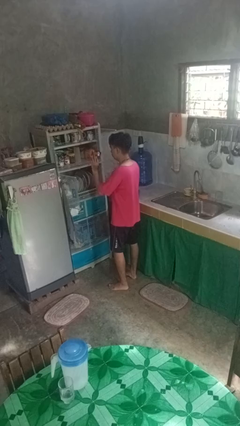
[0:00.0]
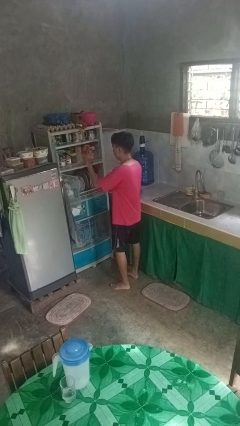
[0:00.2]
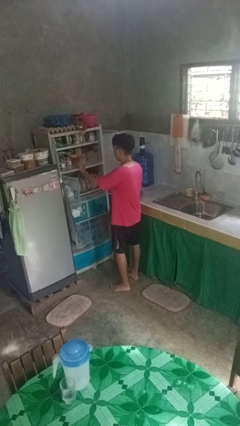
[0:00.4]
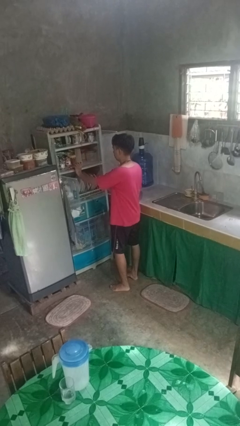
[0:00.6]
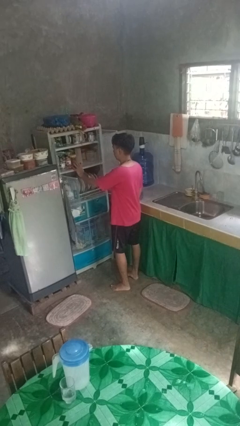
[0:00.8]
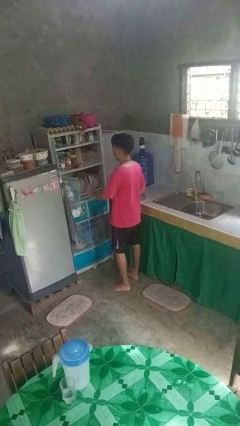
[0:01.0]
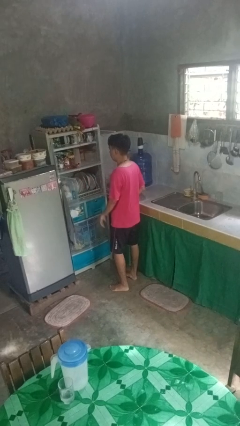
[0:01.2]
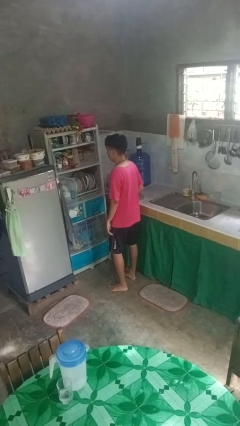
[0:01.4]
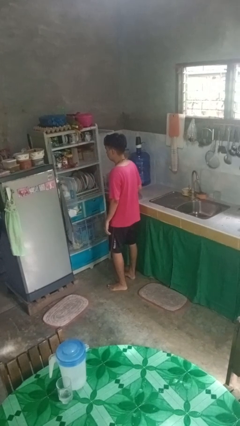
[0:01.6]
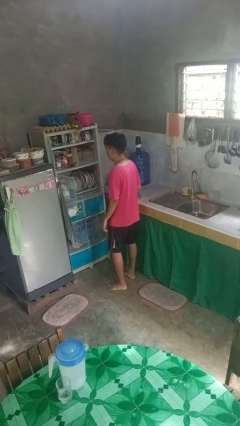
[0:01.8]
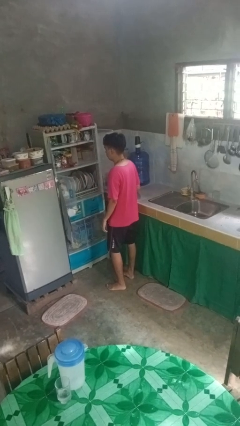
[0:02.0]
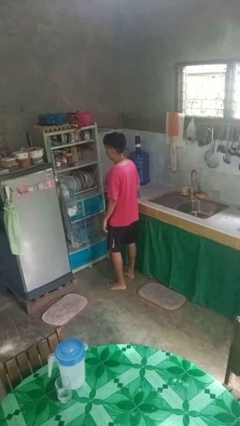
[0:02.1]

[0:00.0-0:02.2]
person puts object in cabinet

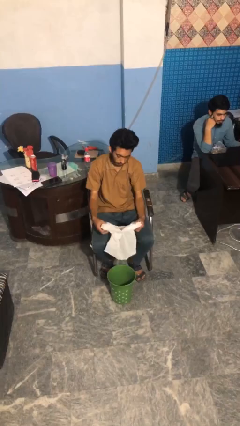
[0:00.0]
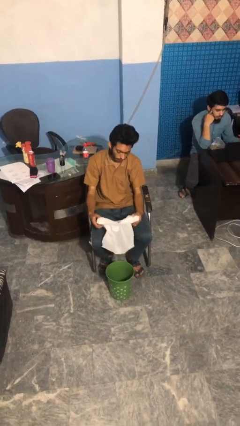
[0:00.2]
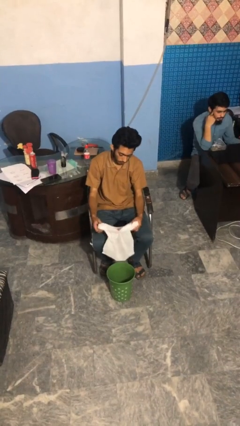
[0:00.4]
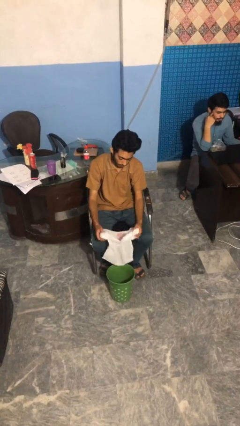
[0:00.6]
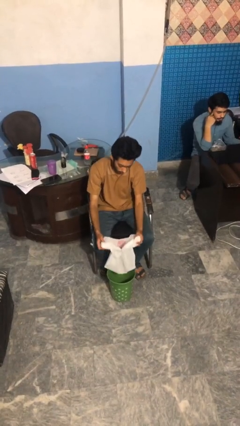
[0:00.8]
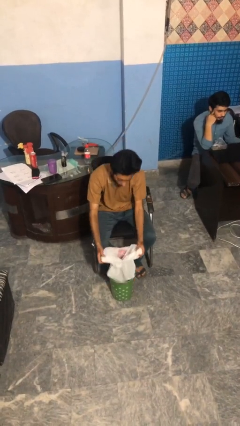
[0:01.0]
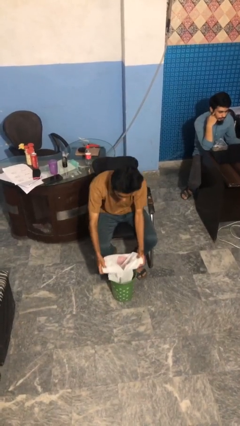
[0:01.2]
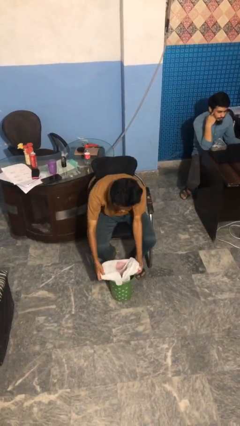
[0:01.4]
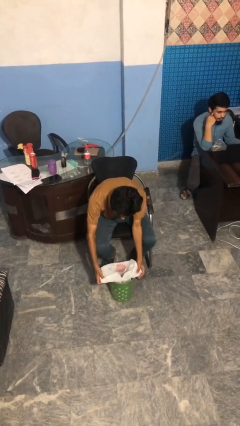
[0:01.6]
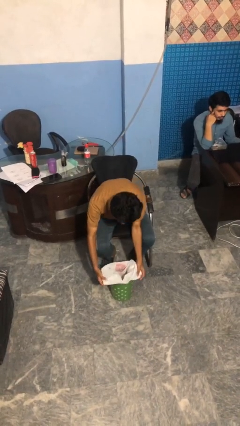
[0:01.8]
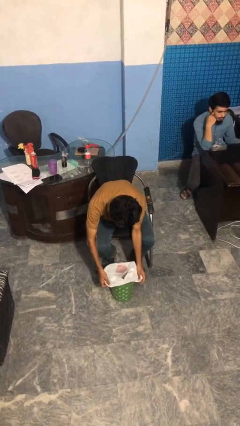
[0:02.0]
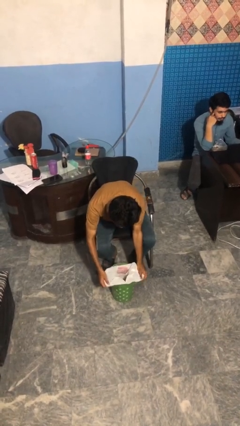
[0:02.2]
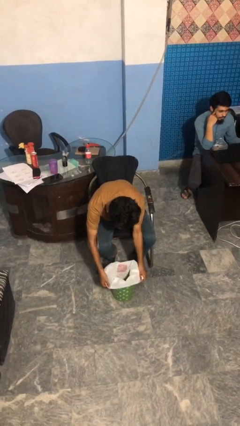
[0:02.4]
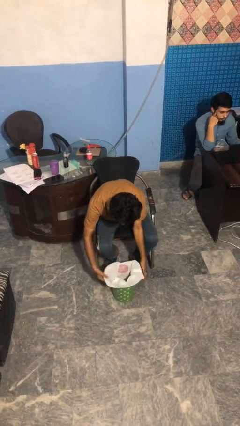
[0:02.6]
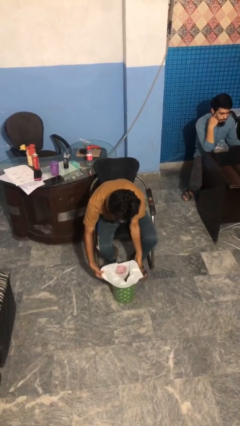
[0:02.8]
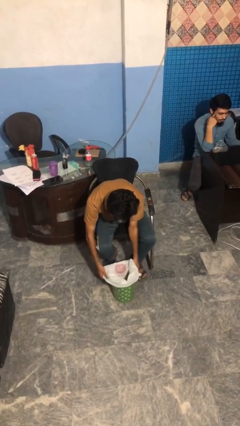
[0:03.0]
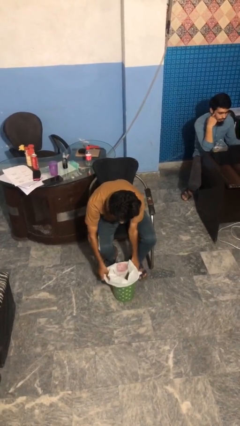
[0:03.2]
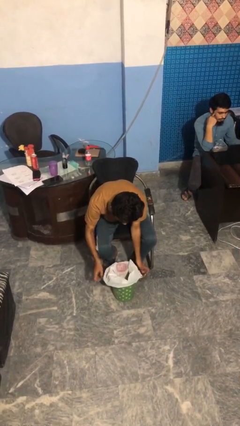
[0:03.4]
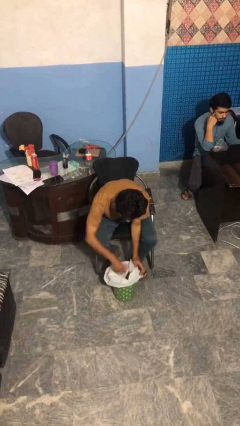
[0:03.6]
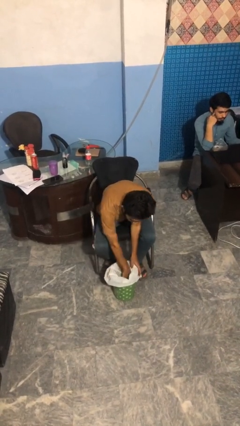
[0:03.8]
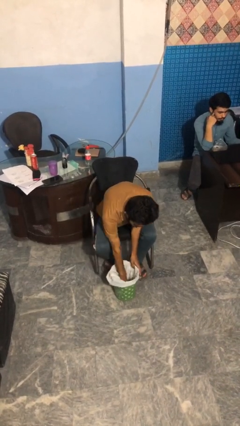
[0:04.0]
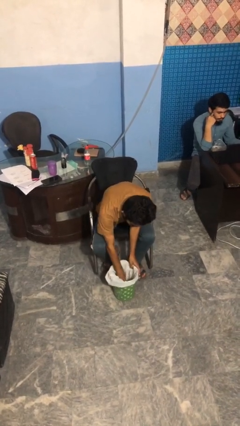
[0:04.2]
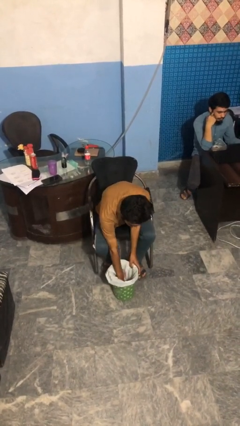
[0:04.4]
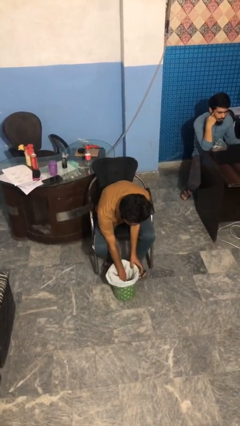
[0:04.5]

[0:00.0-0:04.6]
person inserts trashbag into trashcan

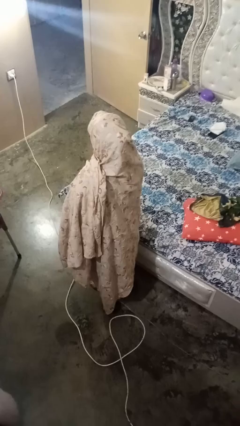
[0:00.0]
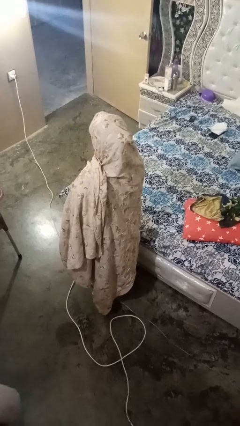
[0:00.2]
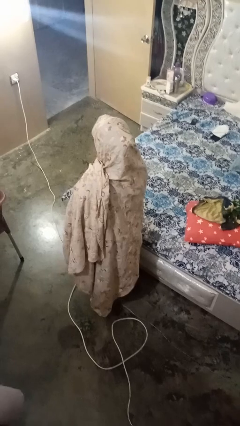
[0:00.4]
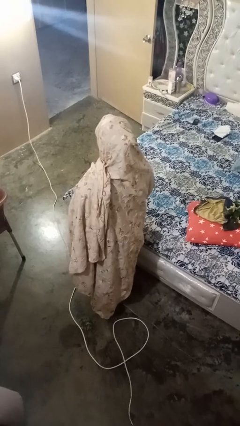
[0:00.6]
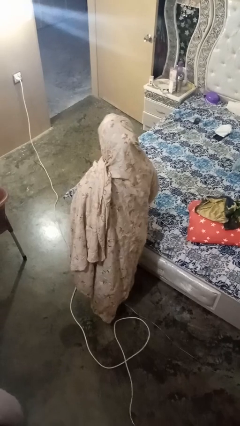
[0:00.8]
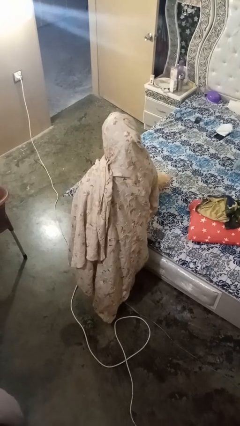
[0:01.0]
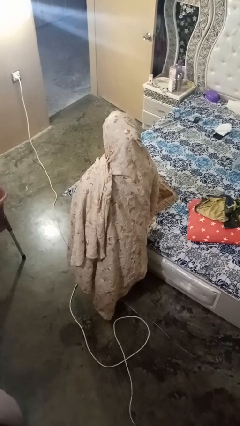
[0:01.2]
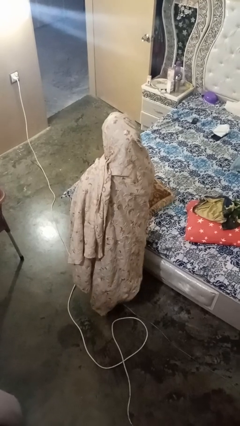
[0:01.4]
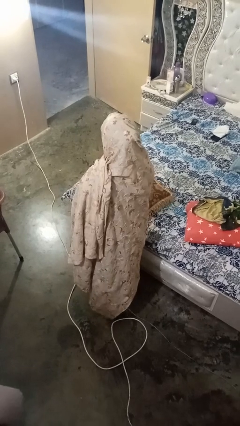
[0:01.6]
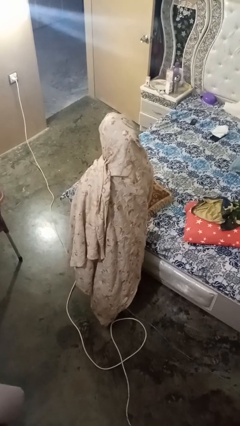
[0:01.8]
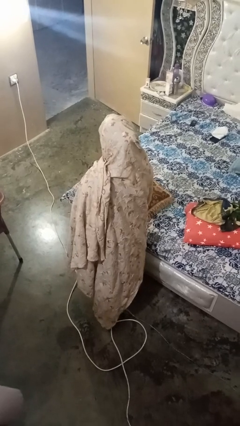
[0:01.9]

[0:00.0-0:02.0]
person puts down object on bed

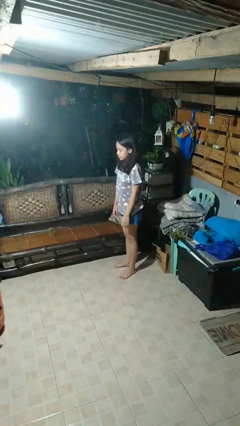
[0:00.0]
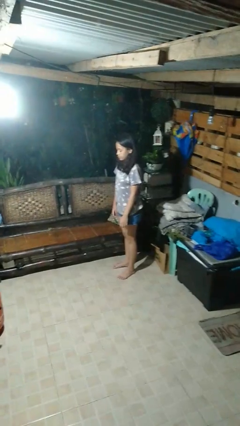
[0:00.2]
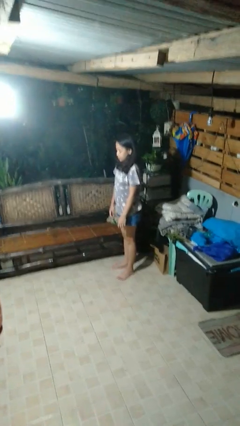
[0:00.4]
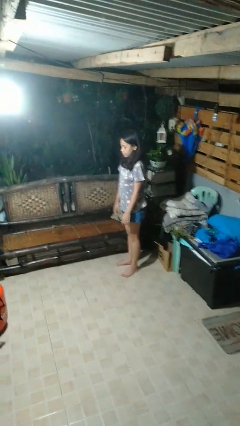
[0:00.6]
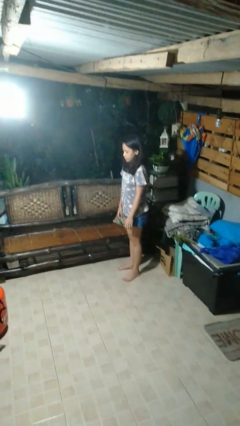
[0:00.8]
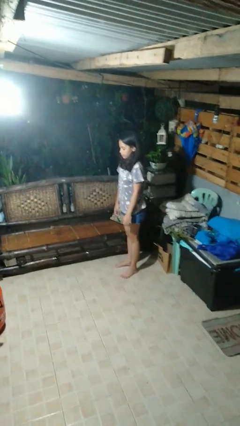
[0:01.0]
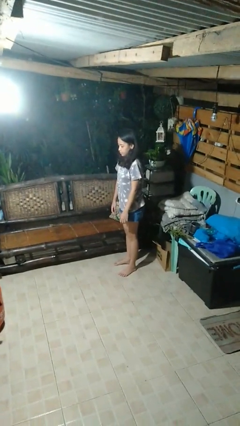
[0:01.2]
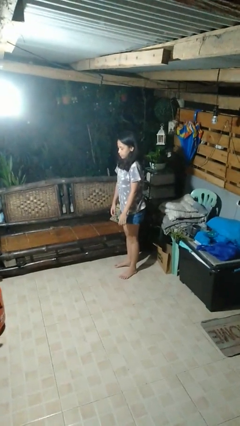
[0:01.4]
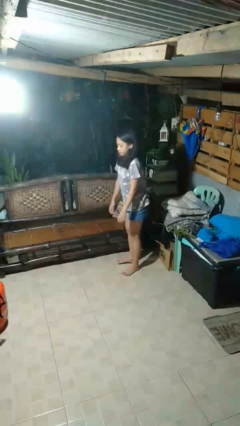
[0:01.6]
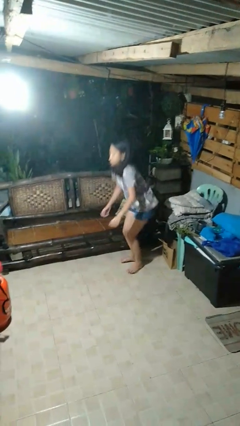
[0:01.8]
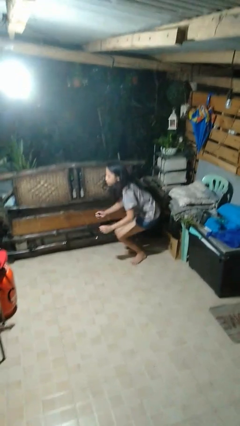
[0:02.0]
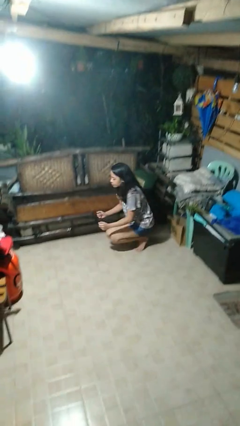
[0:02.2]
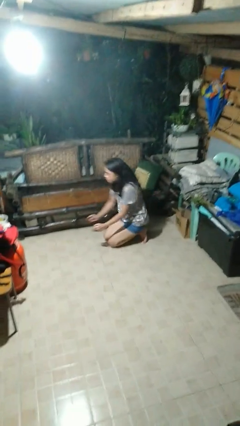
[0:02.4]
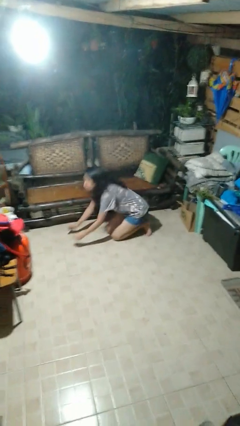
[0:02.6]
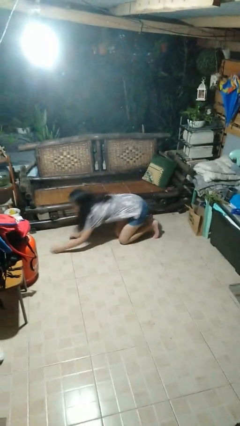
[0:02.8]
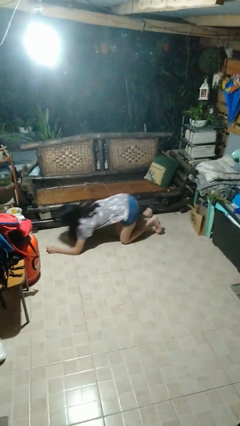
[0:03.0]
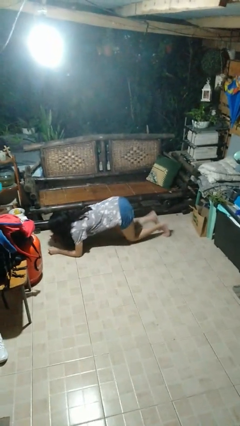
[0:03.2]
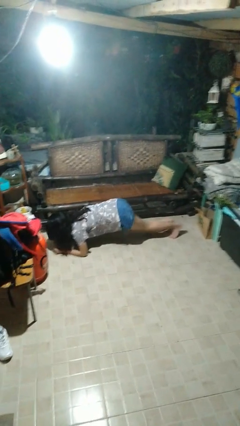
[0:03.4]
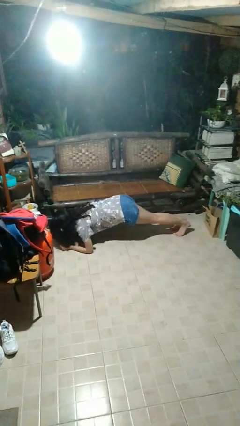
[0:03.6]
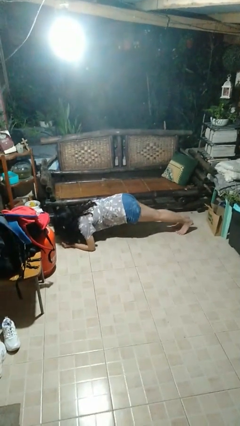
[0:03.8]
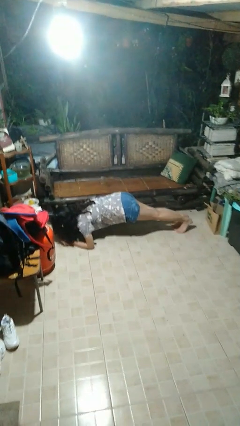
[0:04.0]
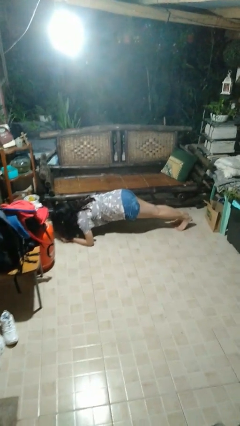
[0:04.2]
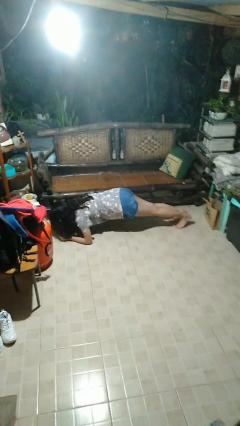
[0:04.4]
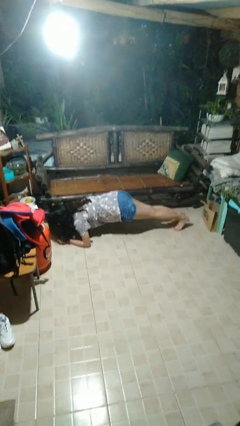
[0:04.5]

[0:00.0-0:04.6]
person exercises with plank

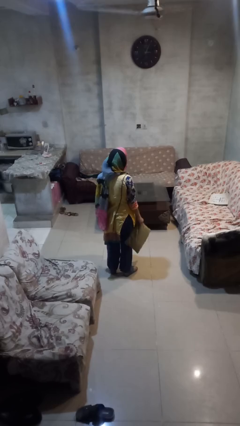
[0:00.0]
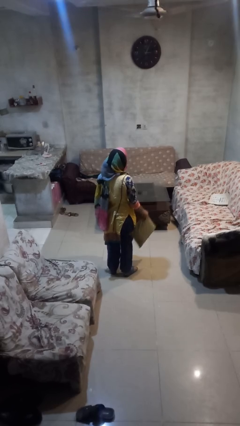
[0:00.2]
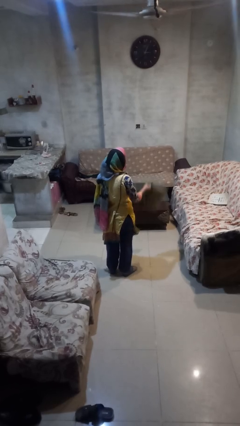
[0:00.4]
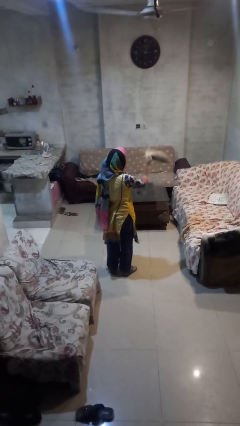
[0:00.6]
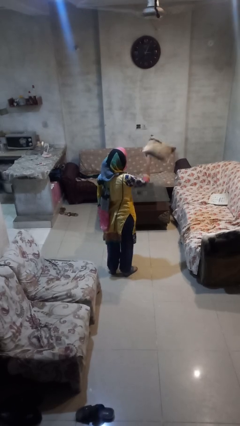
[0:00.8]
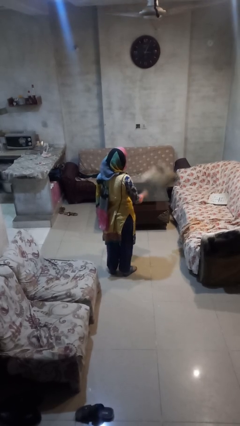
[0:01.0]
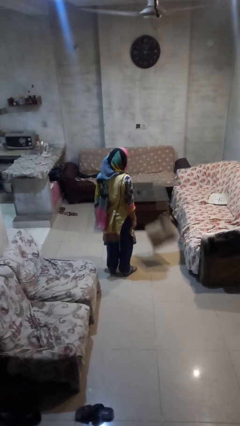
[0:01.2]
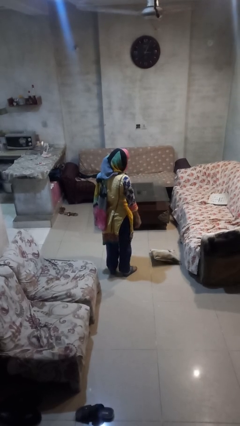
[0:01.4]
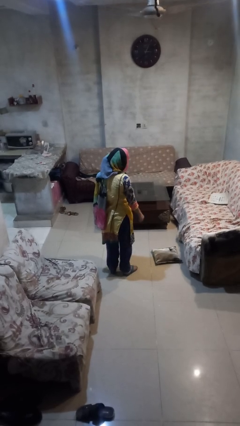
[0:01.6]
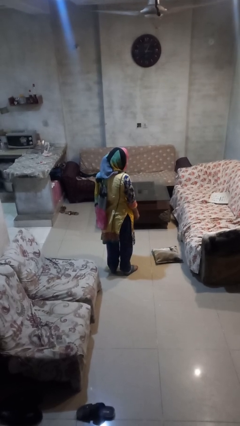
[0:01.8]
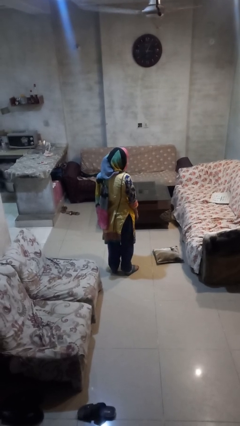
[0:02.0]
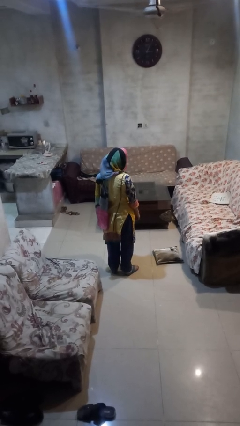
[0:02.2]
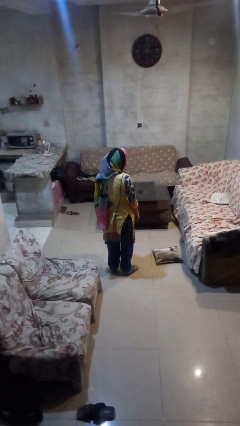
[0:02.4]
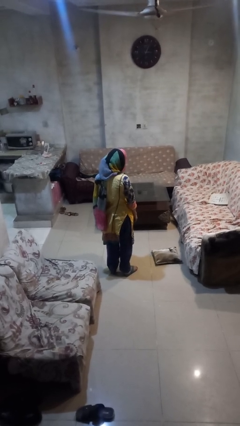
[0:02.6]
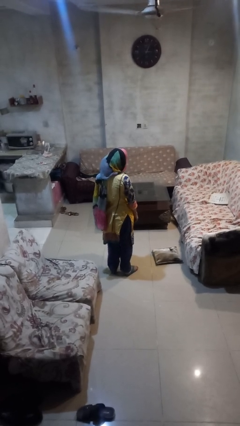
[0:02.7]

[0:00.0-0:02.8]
person throws object into air

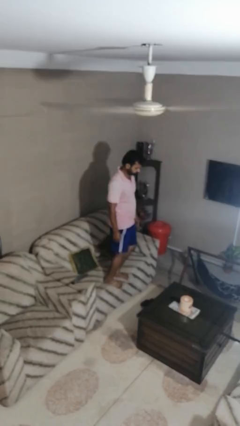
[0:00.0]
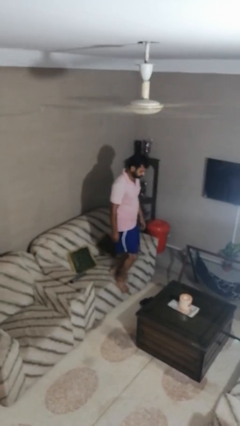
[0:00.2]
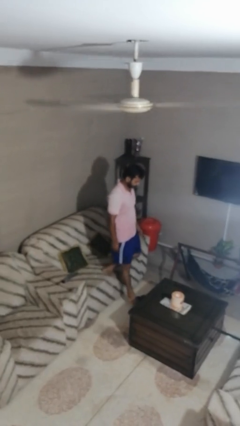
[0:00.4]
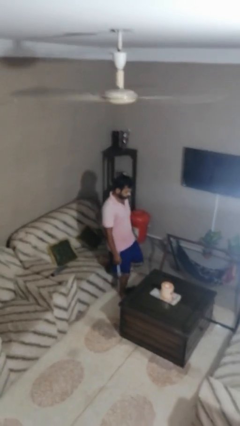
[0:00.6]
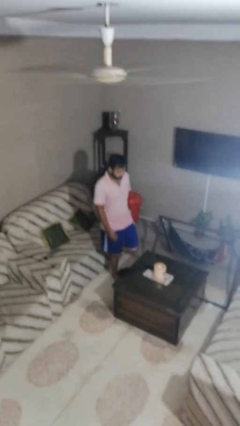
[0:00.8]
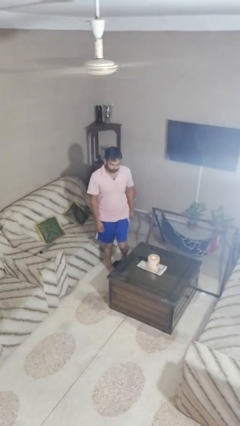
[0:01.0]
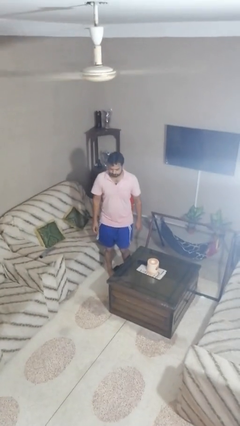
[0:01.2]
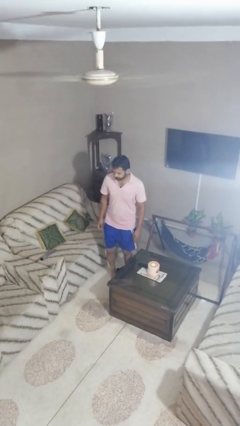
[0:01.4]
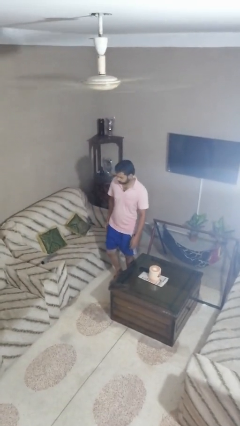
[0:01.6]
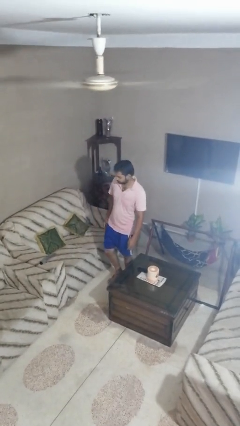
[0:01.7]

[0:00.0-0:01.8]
person climbs off couch
